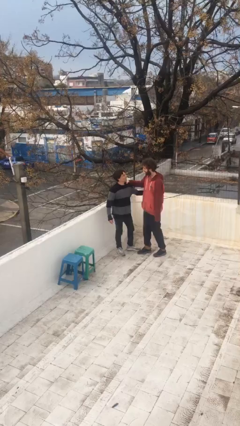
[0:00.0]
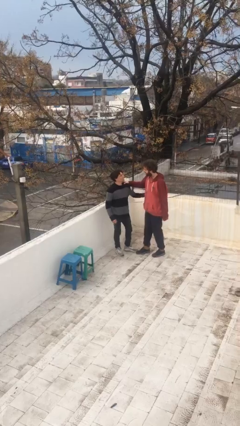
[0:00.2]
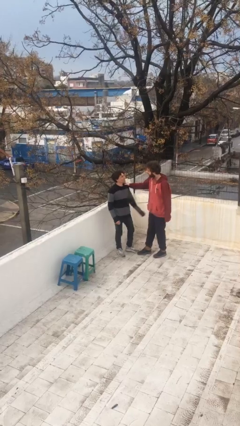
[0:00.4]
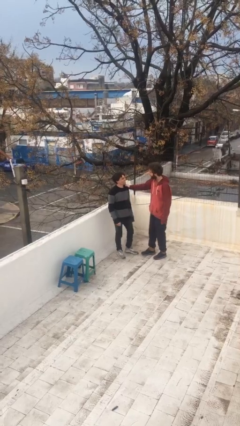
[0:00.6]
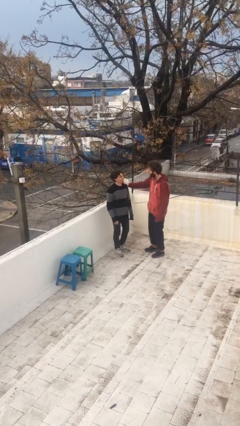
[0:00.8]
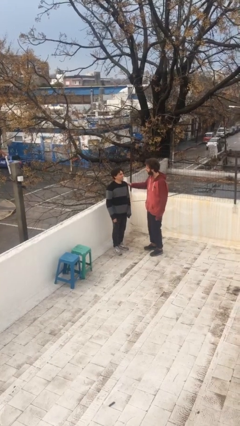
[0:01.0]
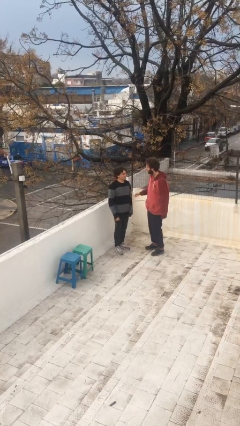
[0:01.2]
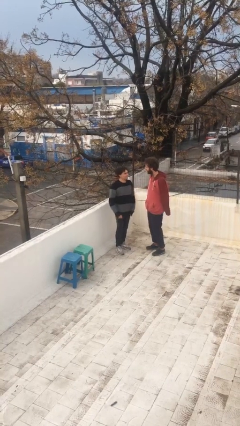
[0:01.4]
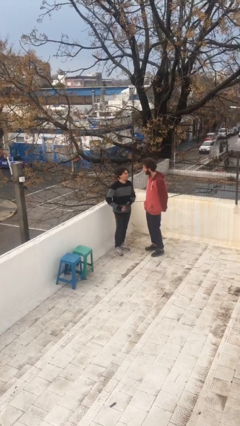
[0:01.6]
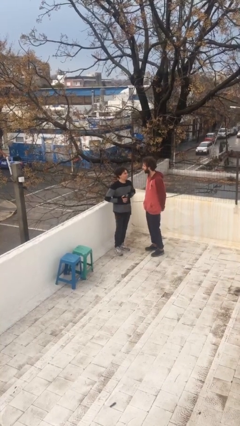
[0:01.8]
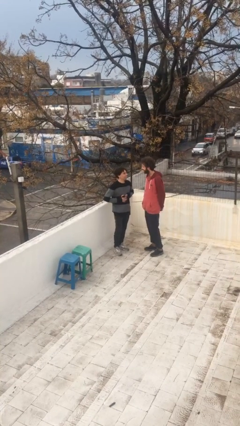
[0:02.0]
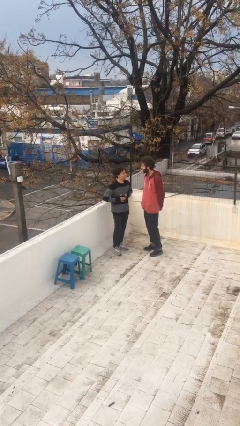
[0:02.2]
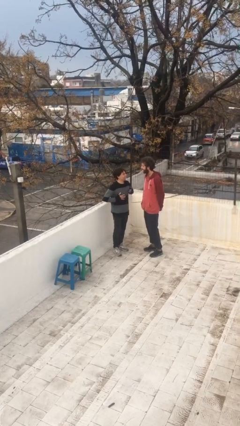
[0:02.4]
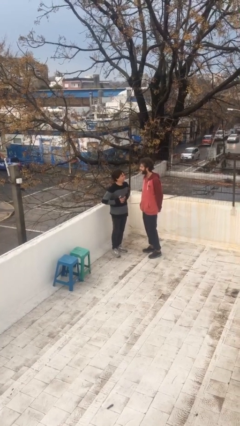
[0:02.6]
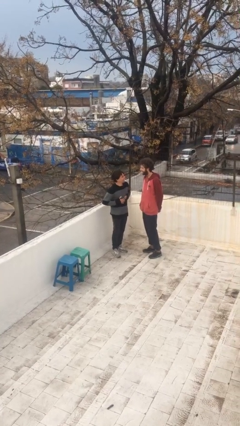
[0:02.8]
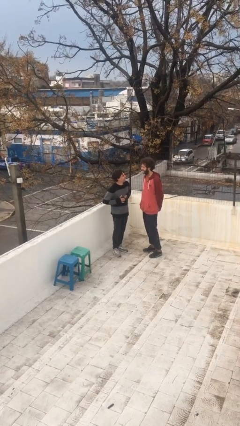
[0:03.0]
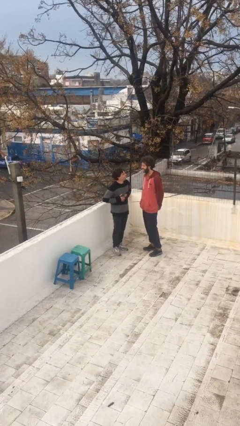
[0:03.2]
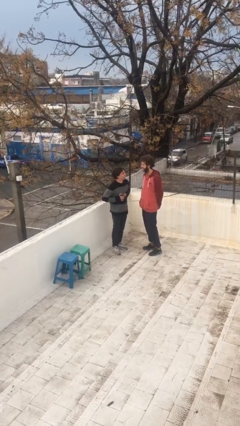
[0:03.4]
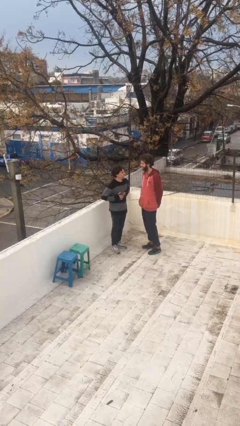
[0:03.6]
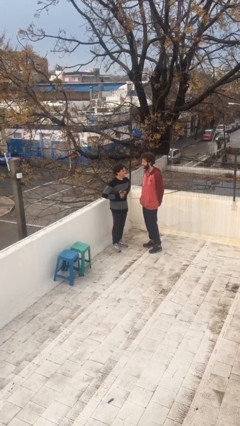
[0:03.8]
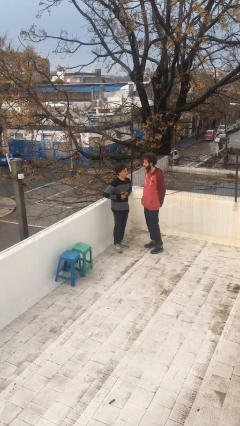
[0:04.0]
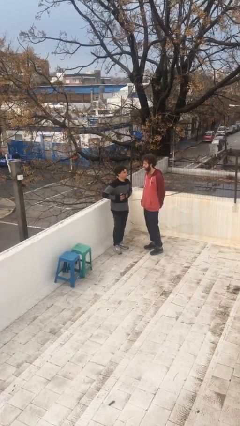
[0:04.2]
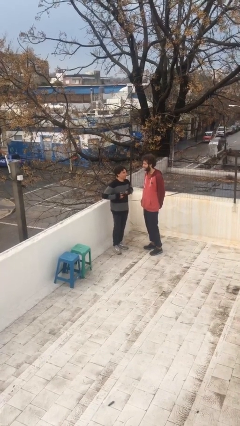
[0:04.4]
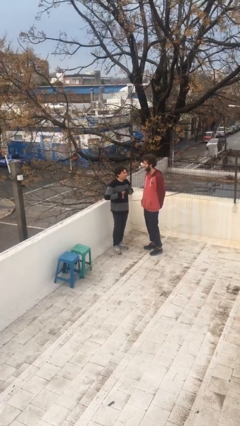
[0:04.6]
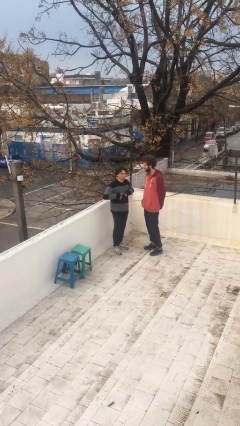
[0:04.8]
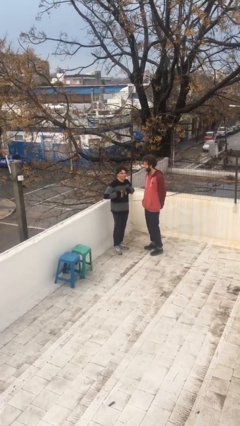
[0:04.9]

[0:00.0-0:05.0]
person talks to person

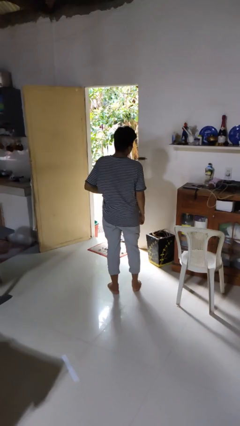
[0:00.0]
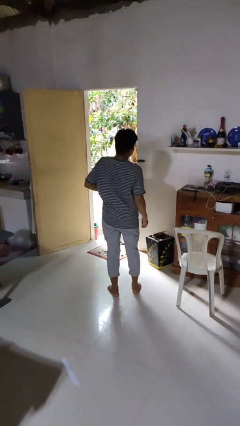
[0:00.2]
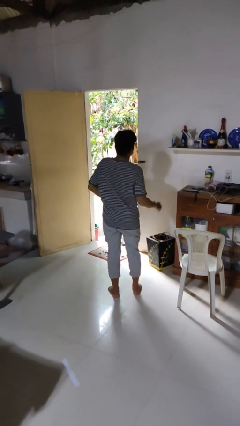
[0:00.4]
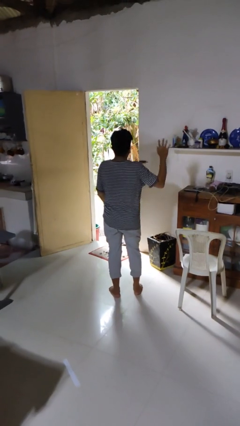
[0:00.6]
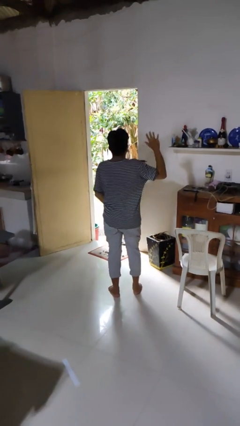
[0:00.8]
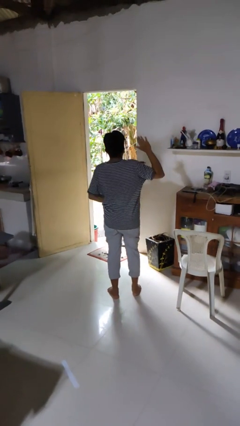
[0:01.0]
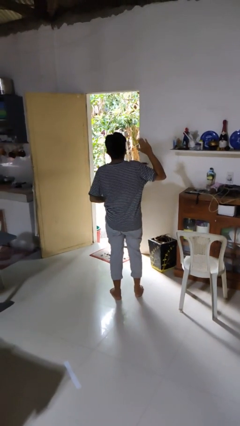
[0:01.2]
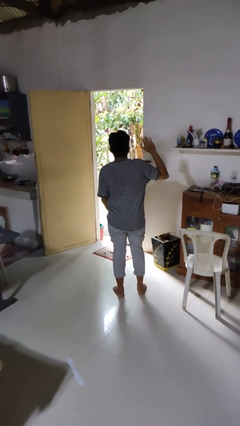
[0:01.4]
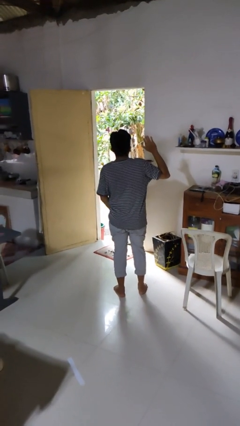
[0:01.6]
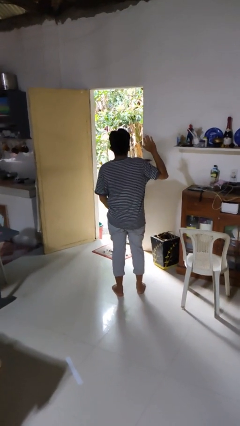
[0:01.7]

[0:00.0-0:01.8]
person gestures number five

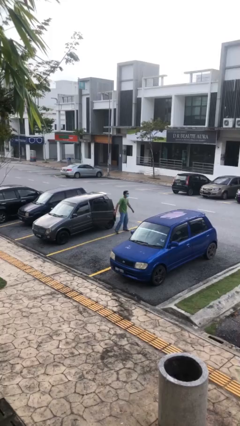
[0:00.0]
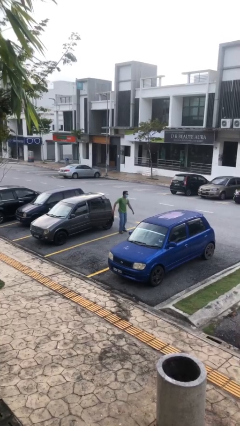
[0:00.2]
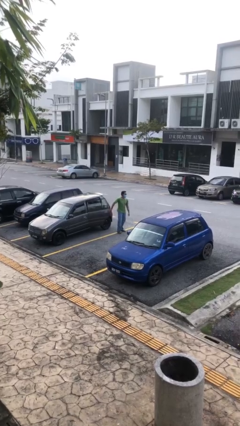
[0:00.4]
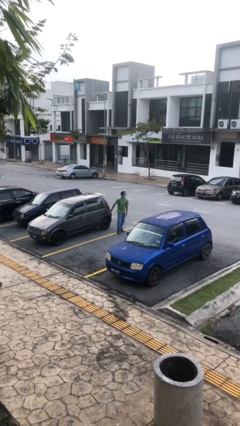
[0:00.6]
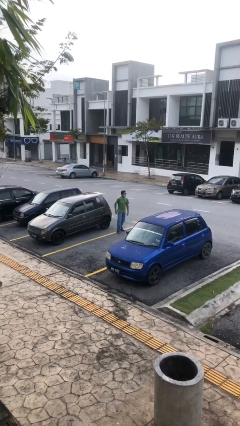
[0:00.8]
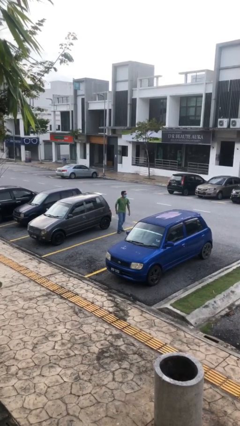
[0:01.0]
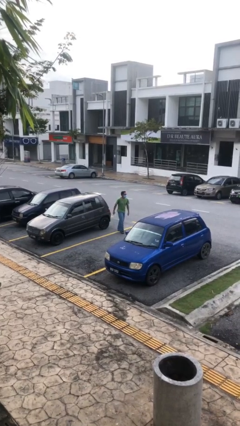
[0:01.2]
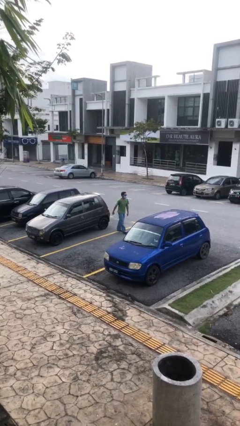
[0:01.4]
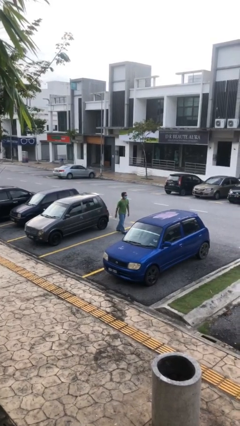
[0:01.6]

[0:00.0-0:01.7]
person closes car door

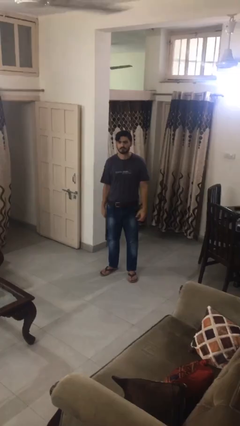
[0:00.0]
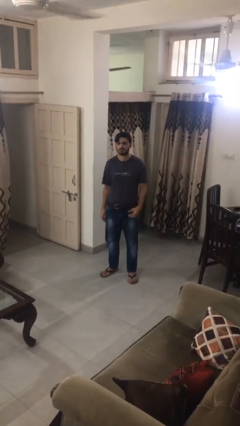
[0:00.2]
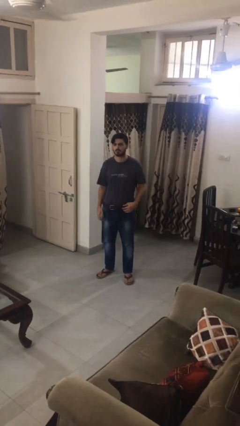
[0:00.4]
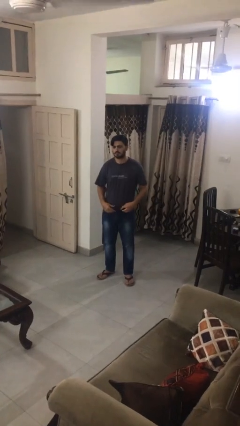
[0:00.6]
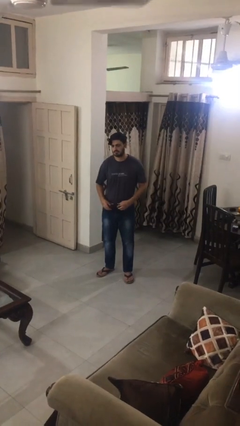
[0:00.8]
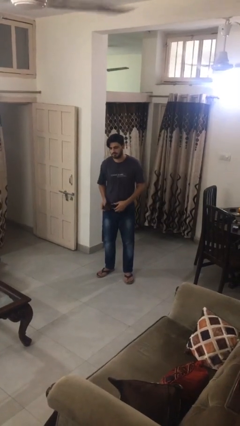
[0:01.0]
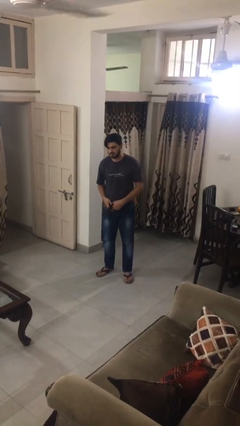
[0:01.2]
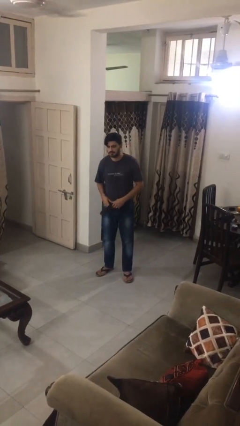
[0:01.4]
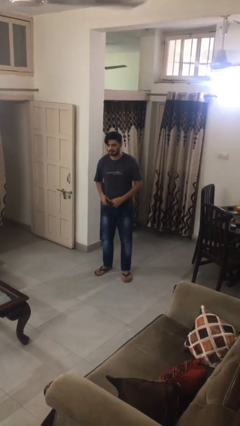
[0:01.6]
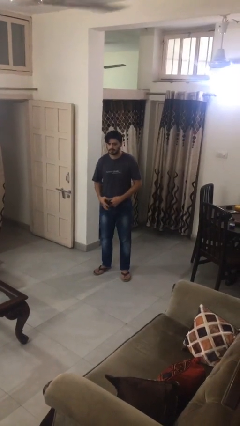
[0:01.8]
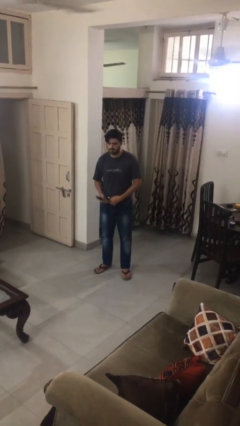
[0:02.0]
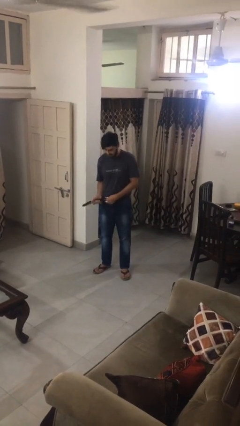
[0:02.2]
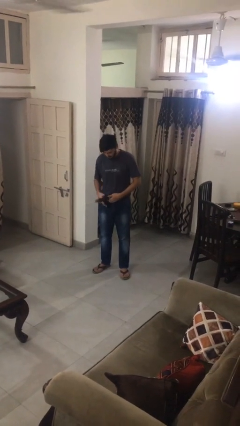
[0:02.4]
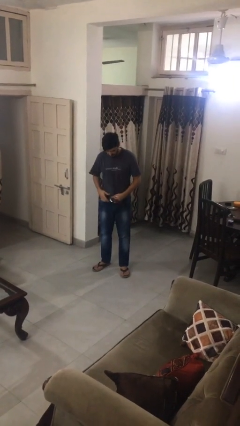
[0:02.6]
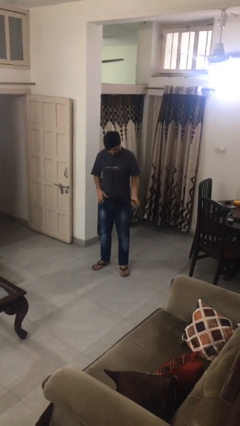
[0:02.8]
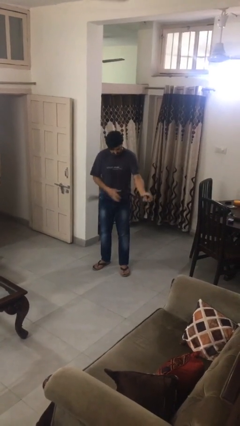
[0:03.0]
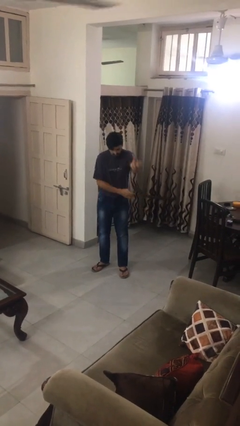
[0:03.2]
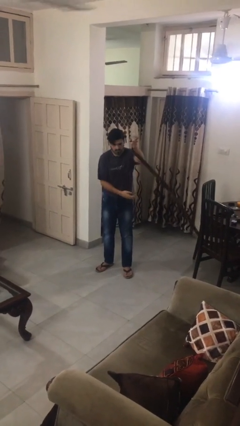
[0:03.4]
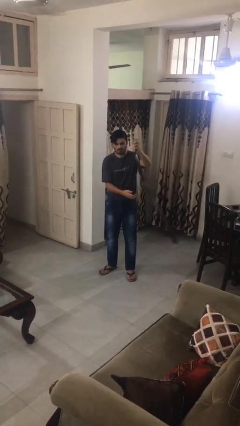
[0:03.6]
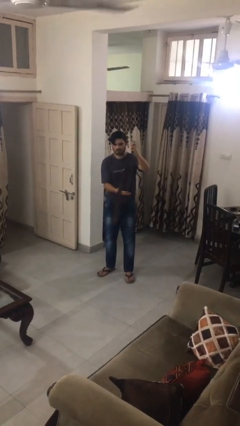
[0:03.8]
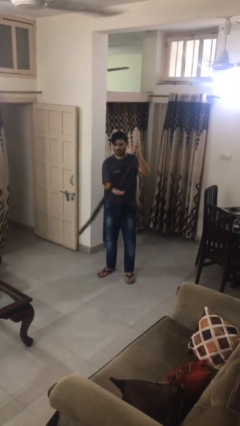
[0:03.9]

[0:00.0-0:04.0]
person takes off belt

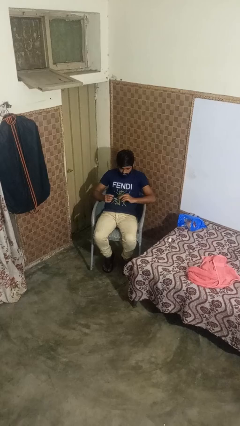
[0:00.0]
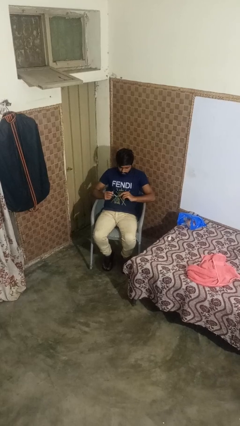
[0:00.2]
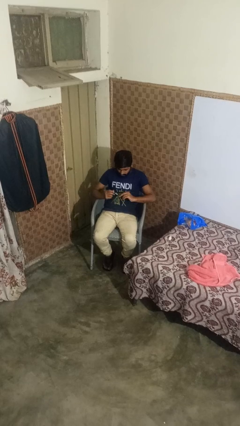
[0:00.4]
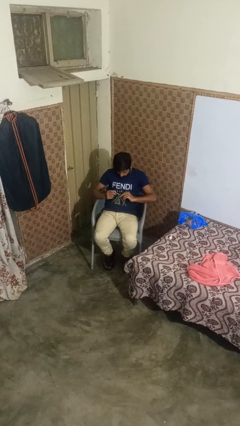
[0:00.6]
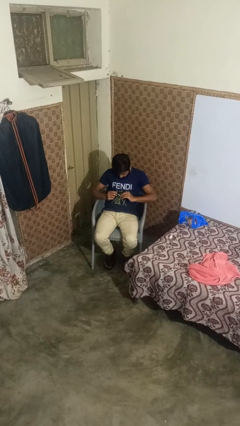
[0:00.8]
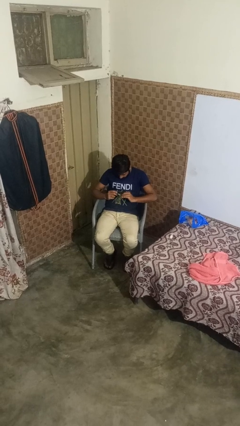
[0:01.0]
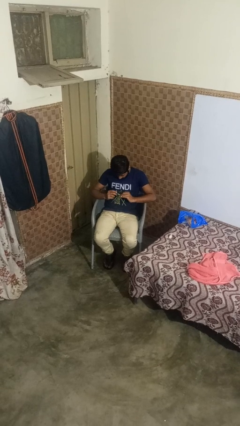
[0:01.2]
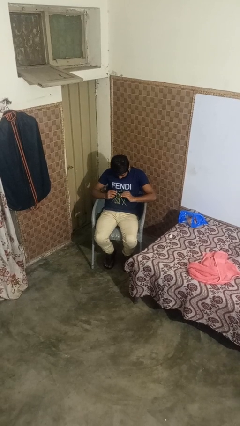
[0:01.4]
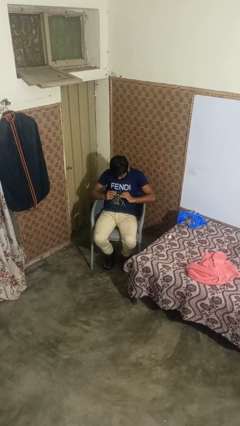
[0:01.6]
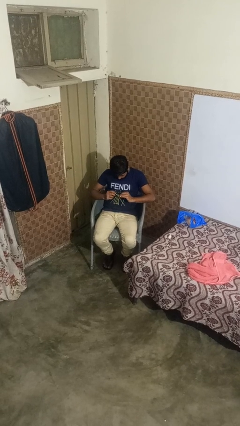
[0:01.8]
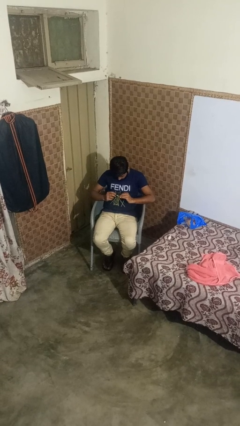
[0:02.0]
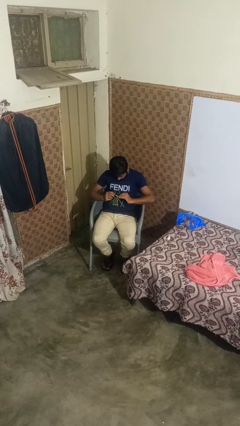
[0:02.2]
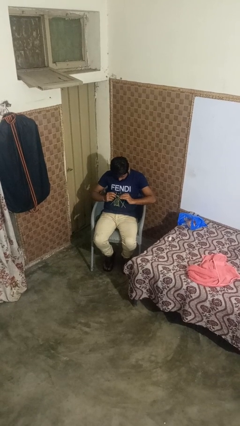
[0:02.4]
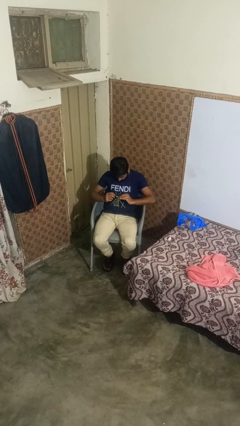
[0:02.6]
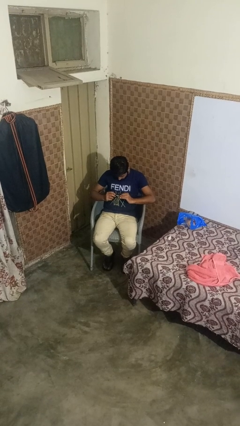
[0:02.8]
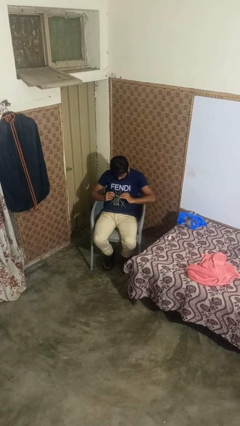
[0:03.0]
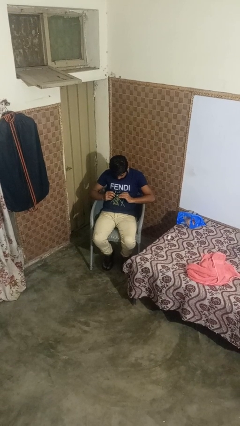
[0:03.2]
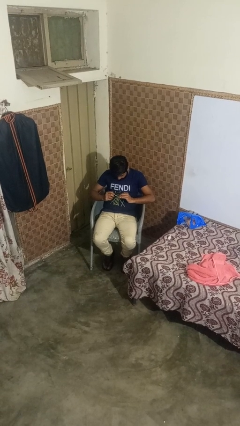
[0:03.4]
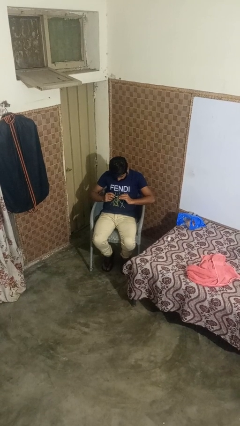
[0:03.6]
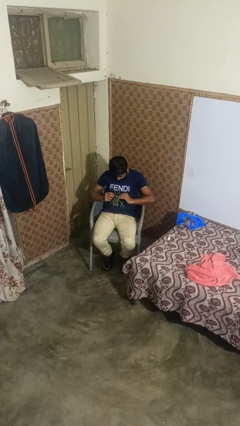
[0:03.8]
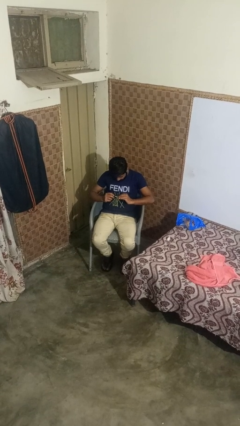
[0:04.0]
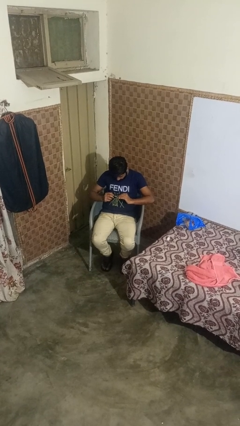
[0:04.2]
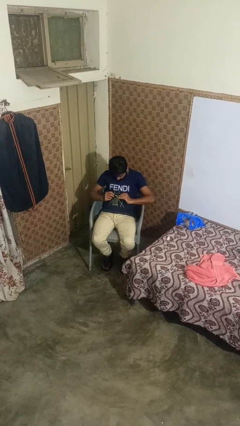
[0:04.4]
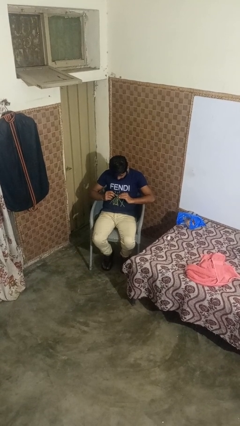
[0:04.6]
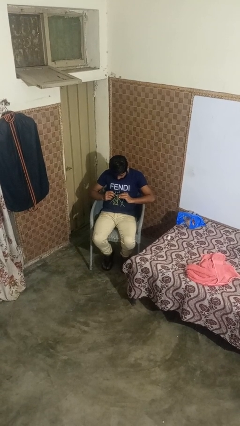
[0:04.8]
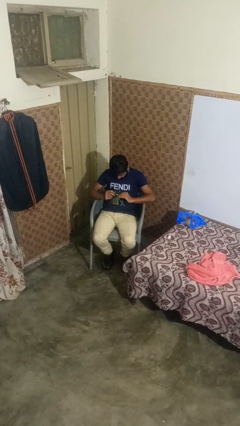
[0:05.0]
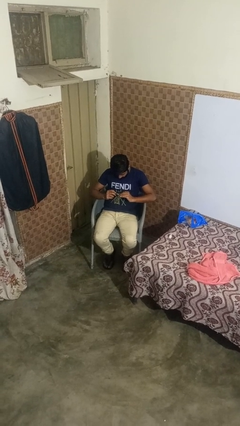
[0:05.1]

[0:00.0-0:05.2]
person paints fingernails
